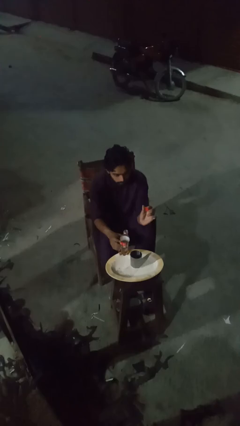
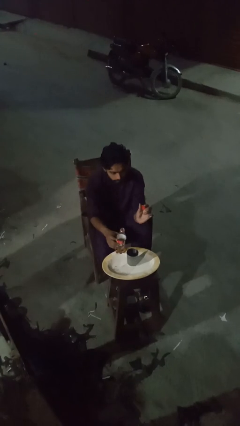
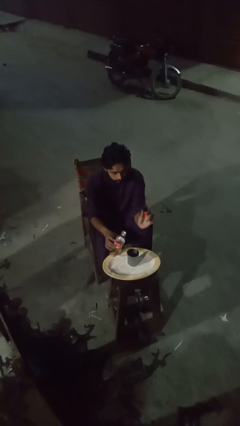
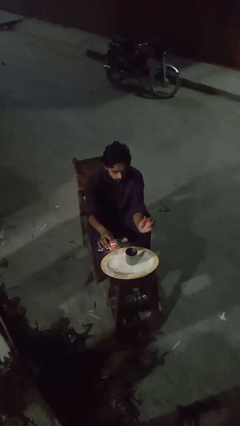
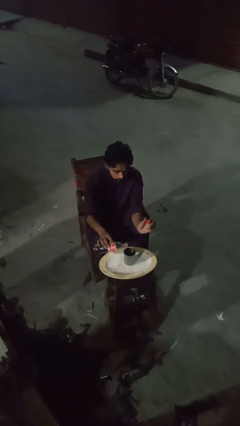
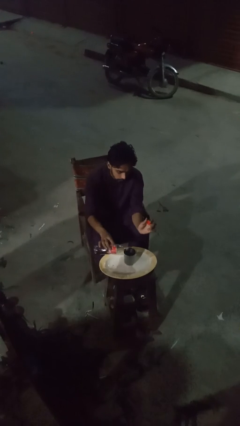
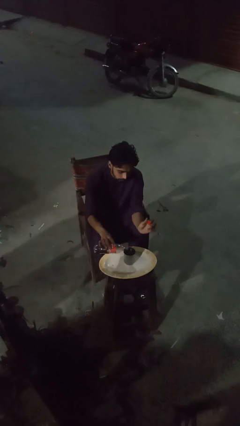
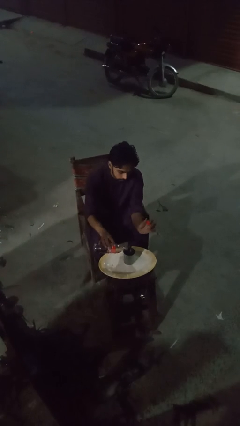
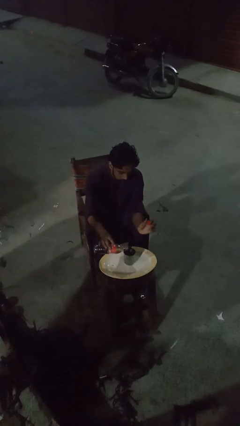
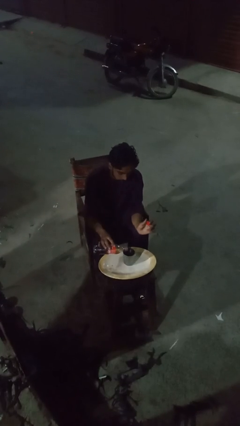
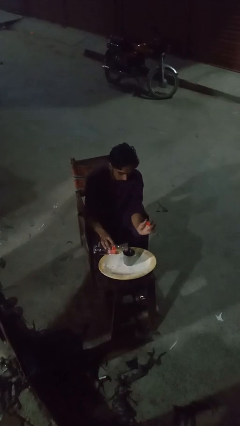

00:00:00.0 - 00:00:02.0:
person pours liquid into cup

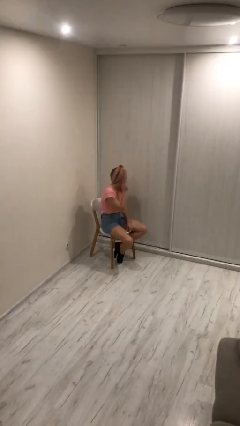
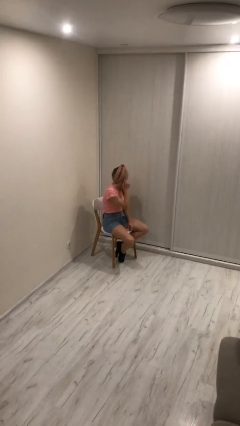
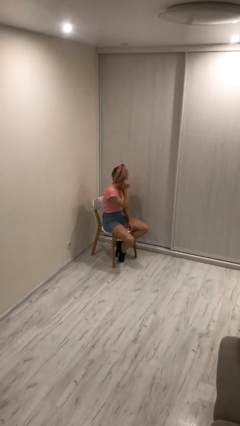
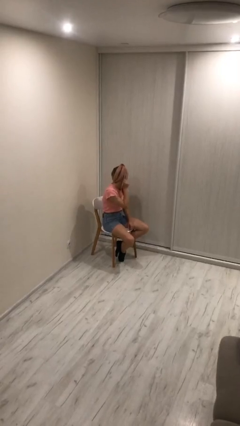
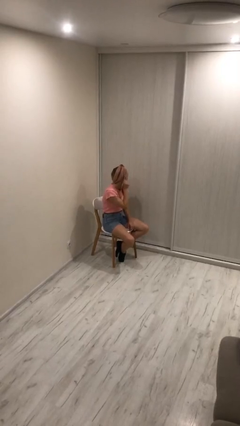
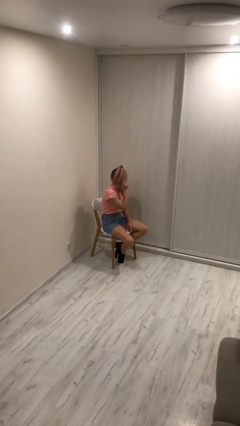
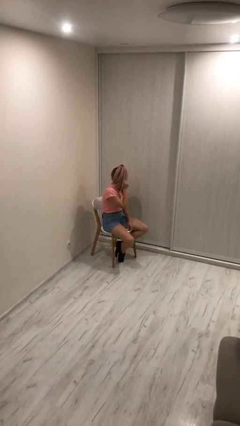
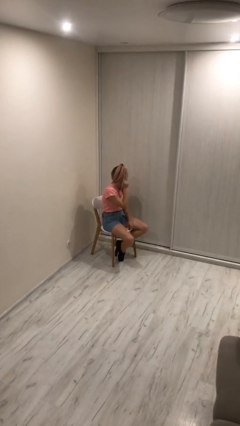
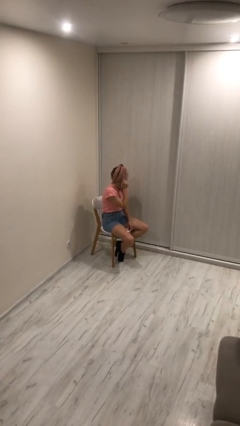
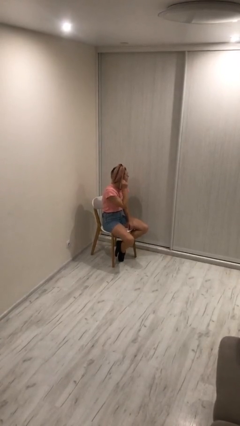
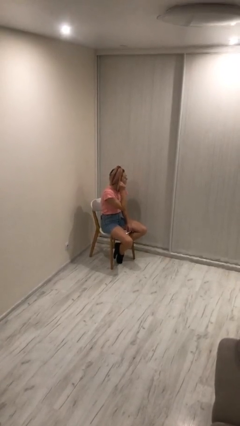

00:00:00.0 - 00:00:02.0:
person touches earlobe

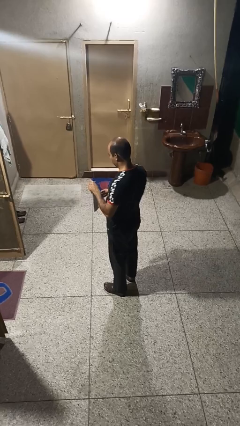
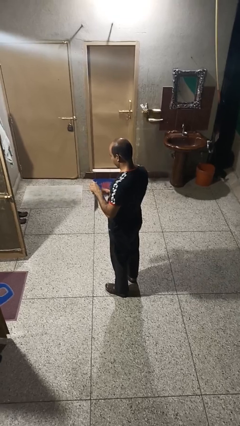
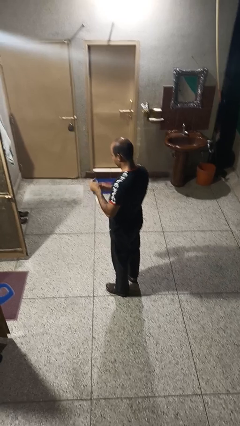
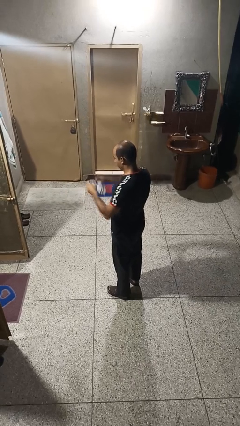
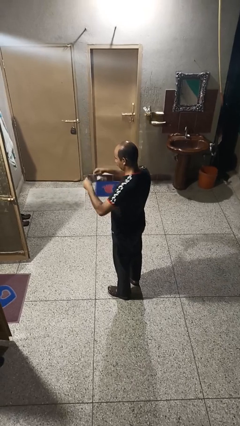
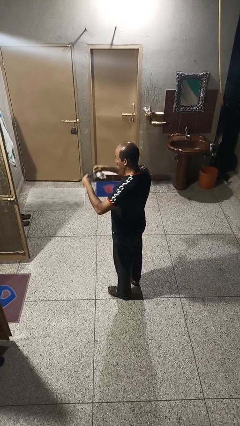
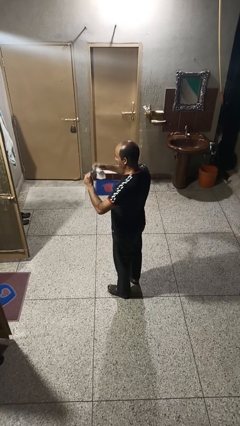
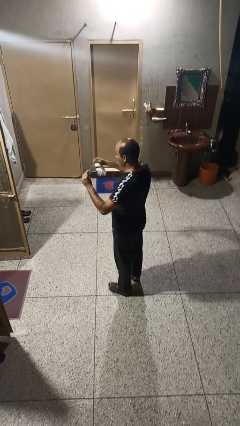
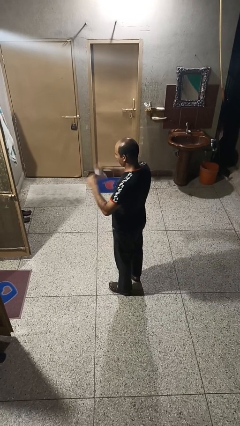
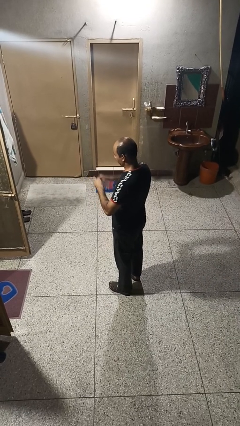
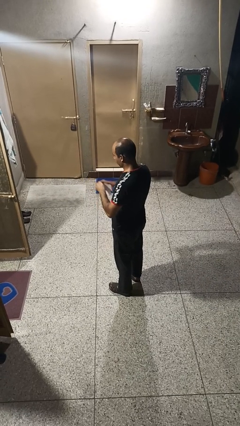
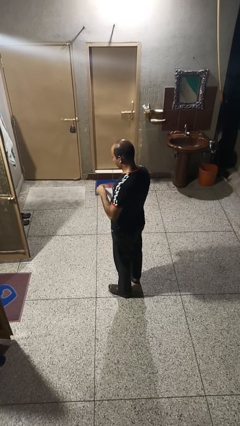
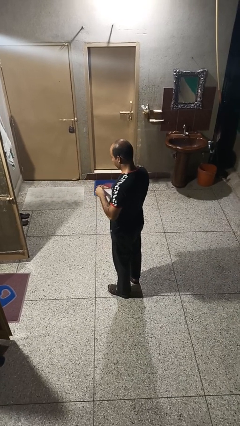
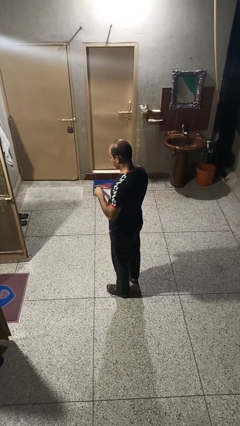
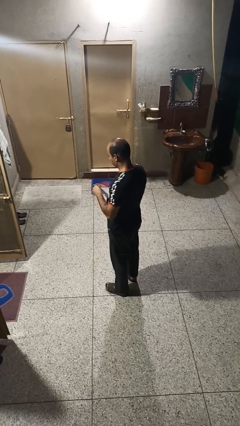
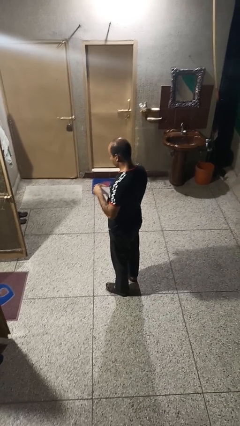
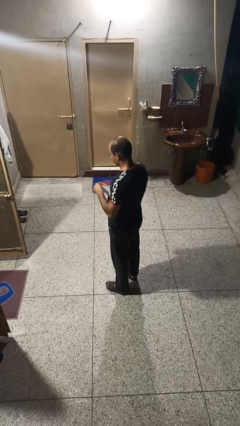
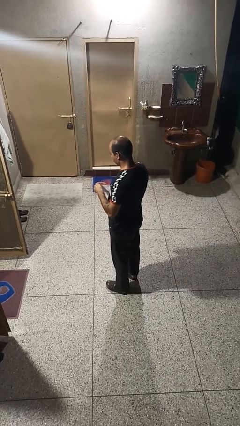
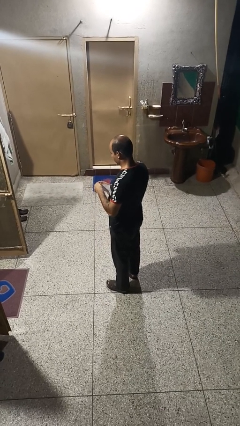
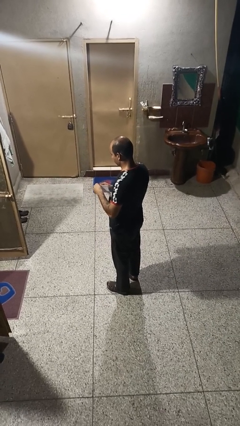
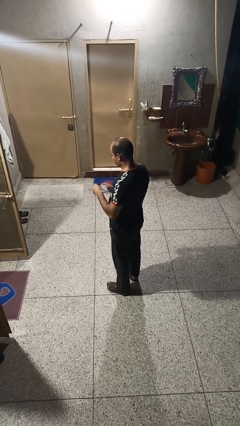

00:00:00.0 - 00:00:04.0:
person tears paper

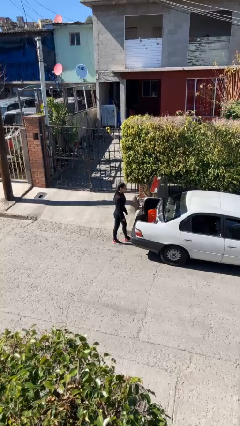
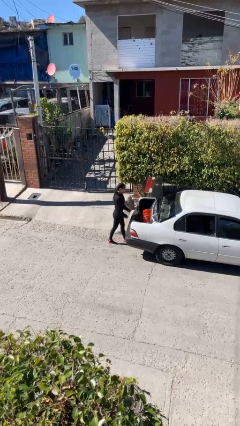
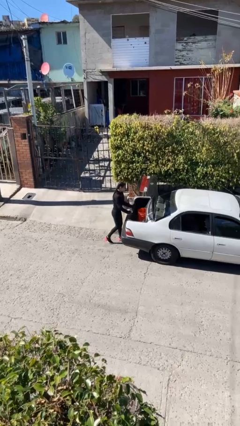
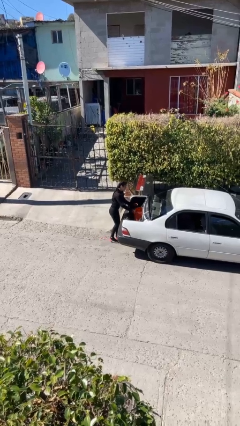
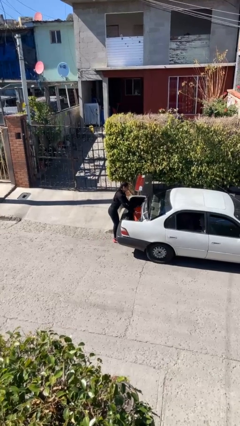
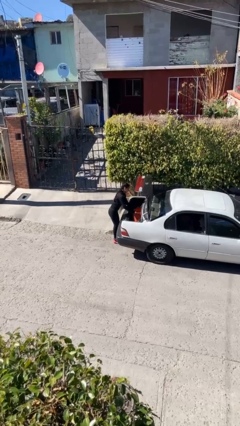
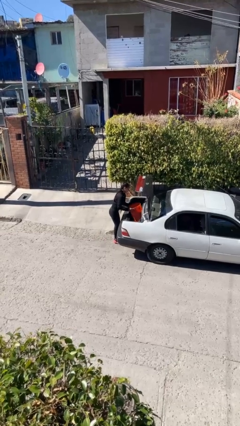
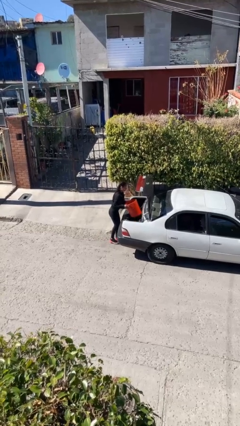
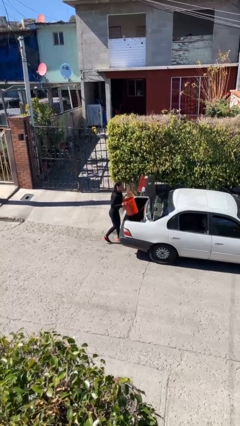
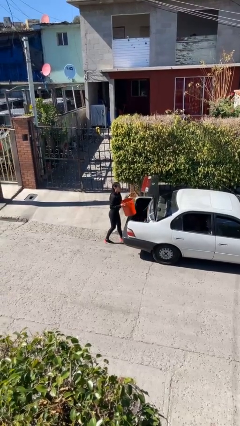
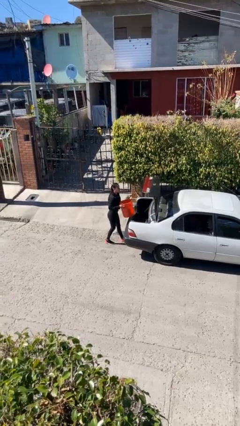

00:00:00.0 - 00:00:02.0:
person unloads car

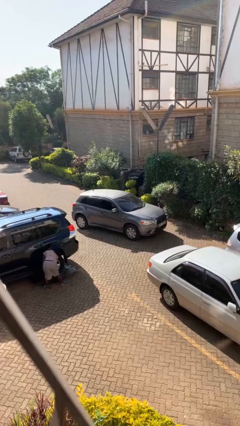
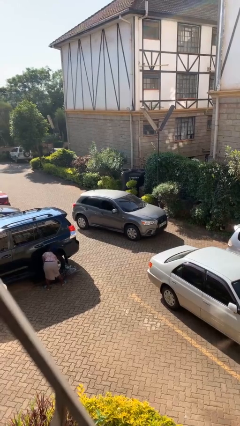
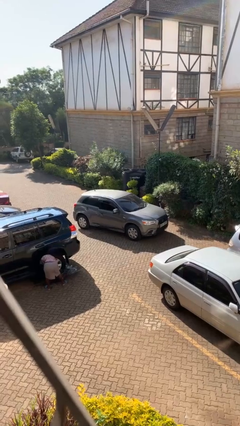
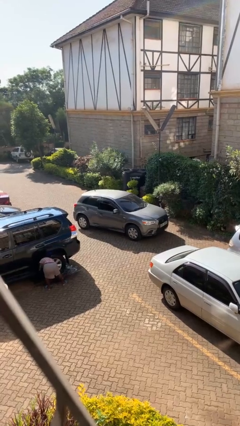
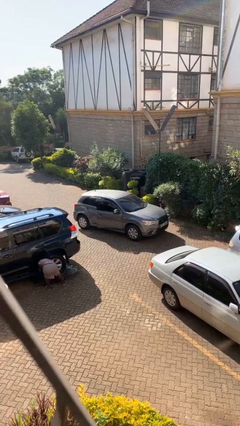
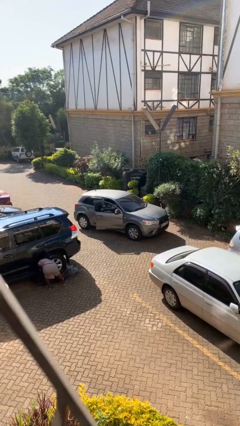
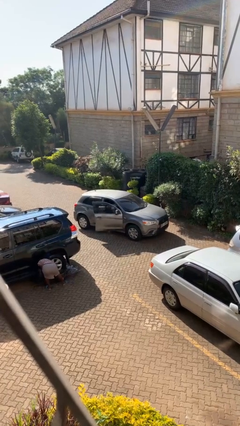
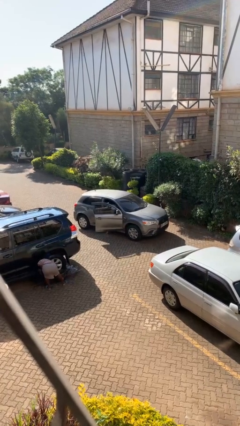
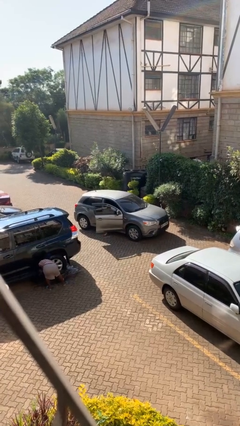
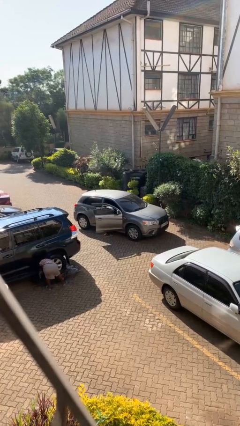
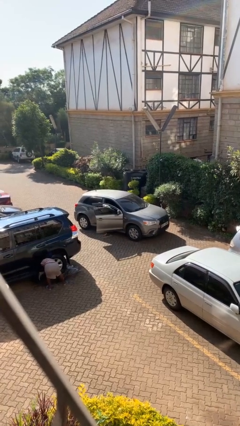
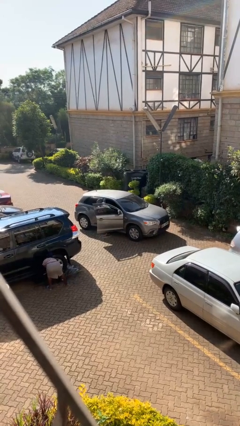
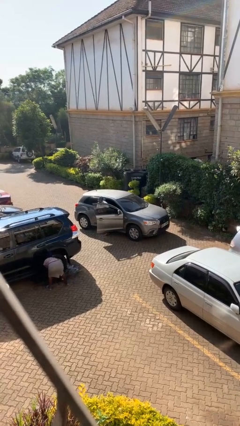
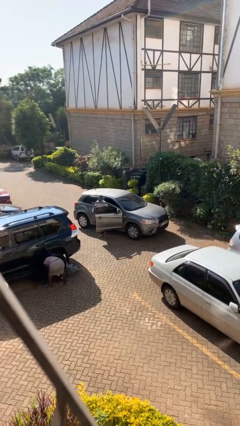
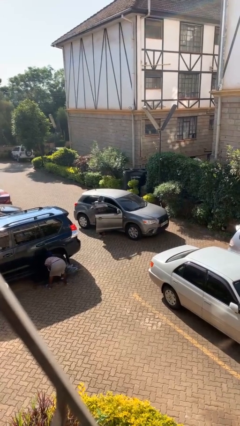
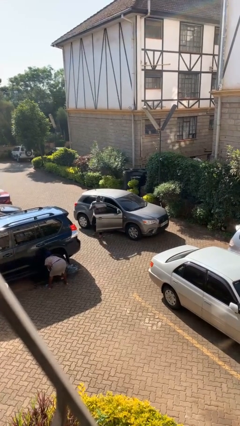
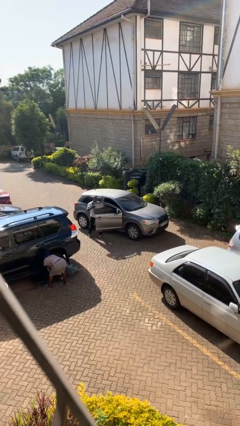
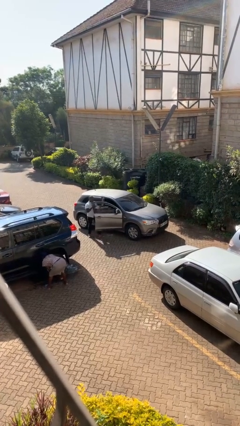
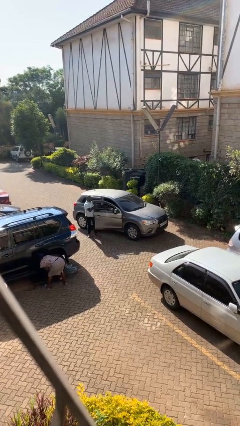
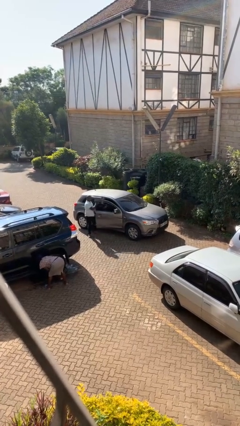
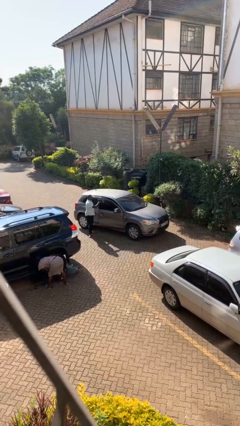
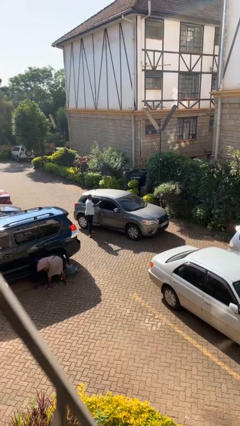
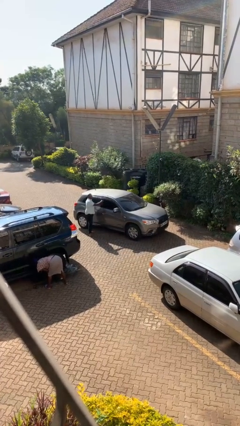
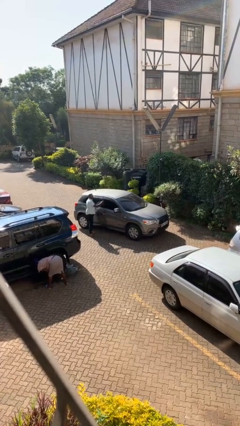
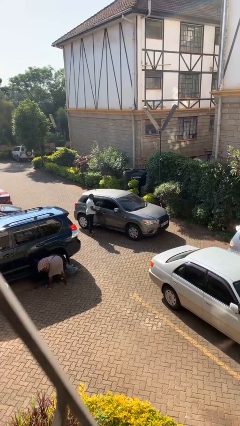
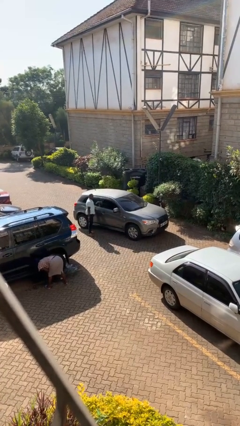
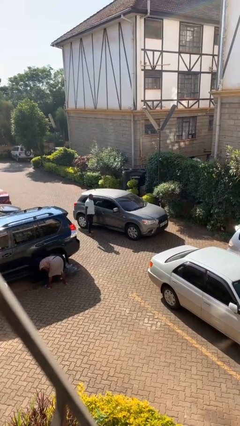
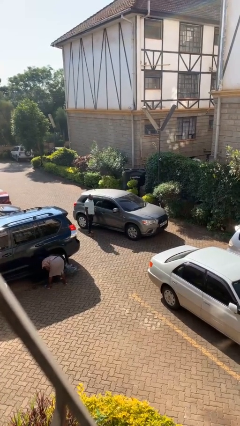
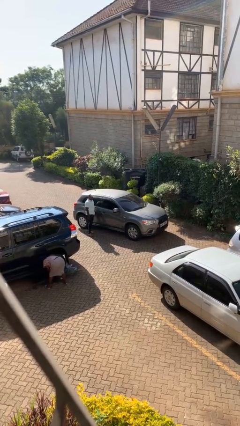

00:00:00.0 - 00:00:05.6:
car drops off person

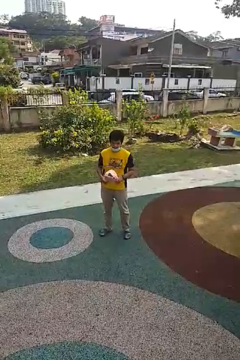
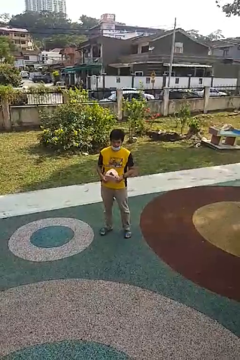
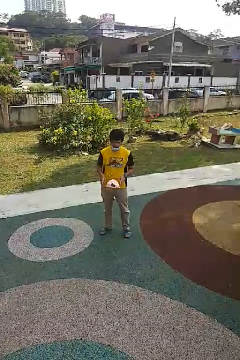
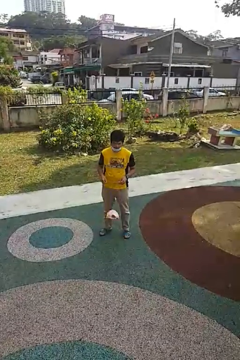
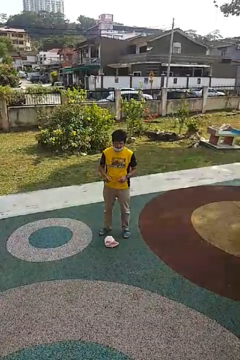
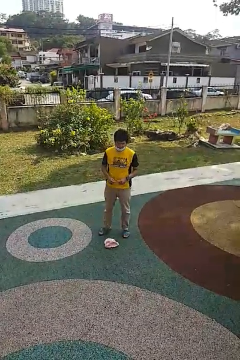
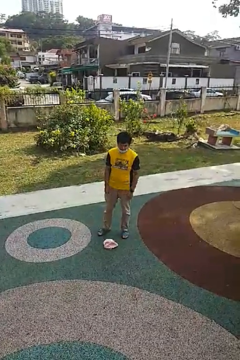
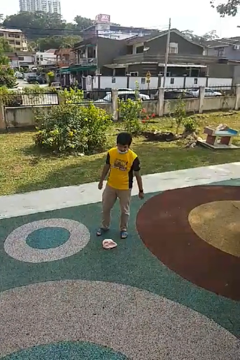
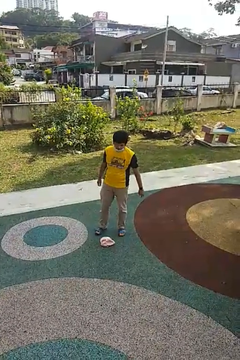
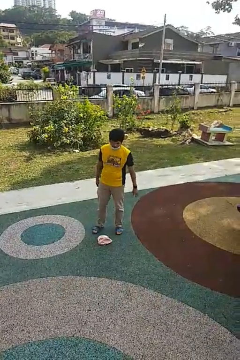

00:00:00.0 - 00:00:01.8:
person drops object

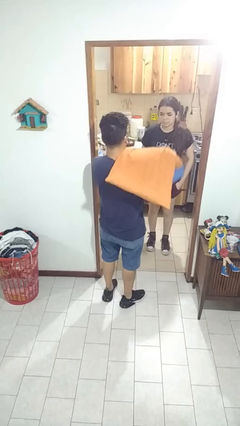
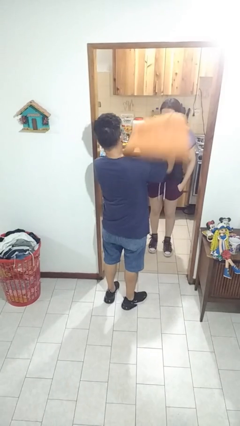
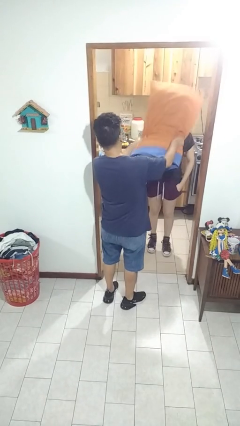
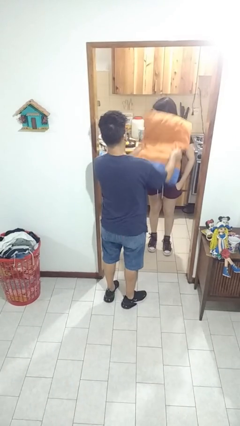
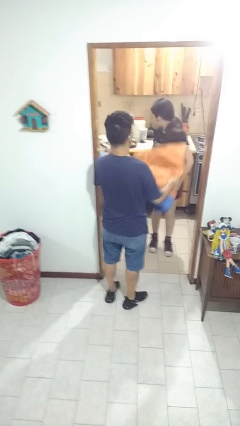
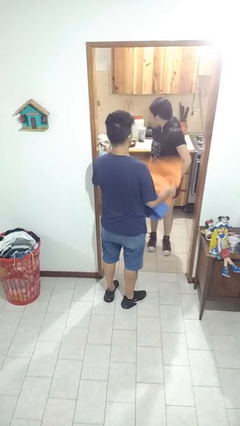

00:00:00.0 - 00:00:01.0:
person hits person with pillow
